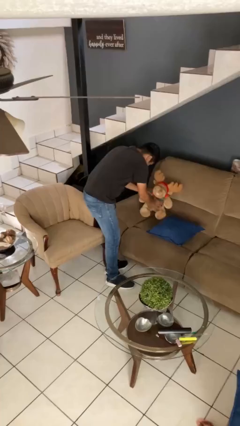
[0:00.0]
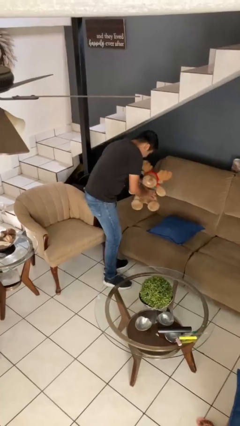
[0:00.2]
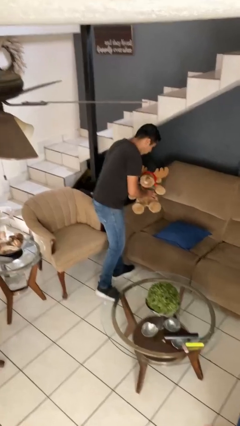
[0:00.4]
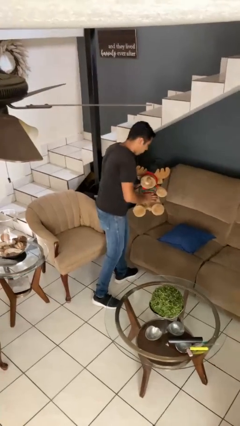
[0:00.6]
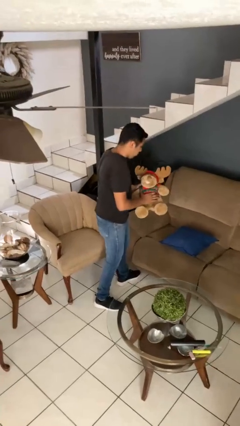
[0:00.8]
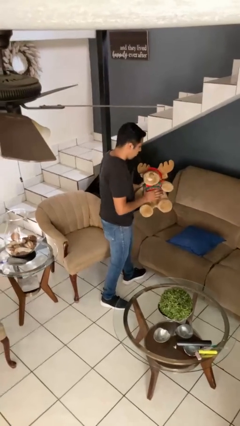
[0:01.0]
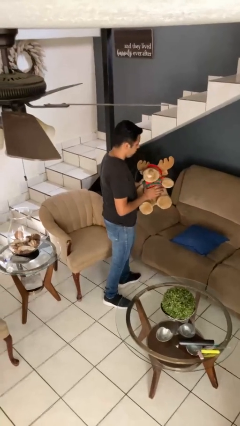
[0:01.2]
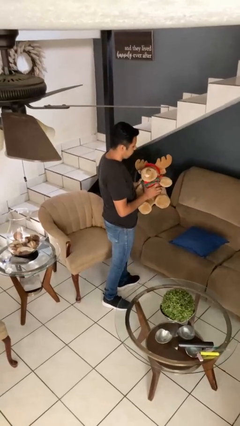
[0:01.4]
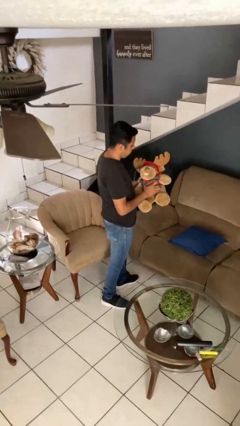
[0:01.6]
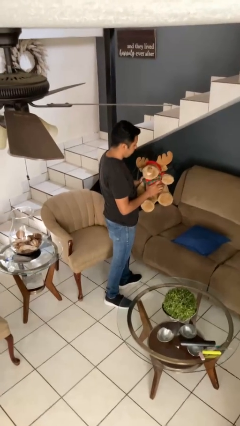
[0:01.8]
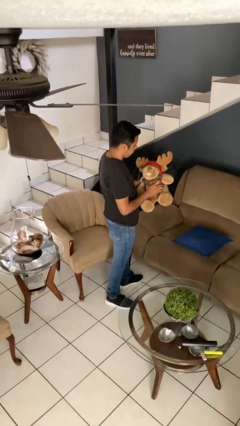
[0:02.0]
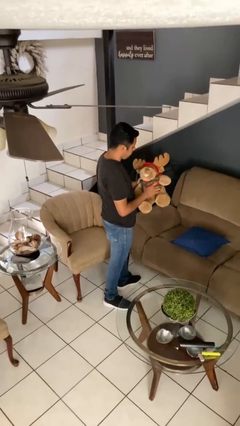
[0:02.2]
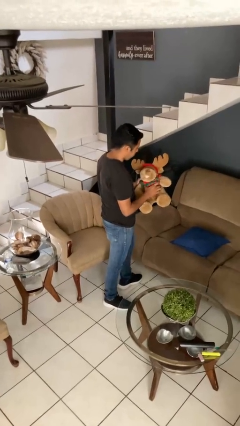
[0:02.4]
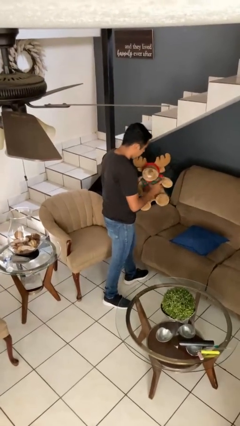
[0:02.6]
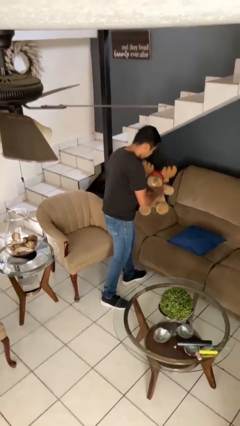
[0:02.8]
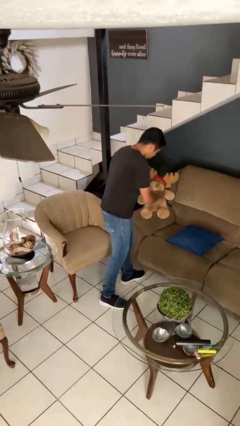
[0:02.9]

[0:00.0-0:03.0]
person picks up object from couch

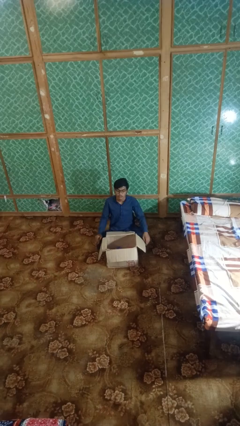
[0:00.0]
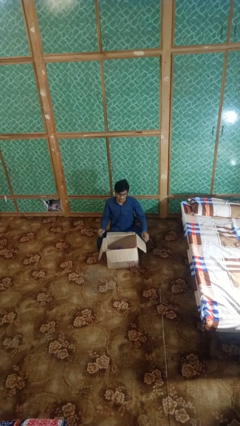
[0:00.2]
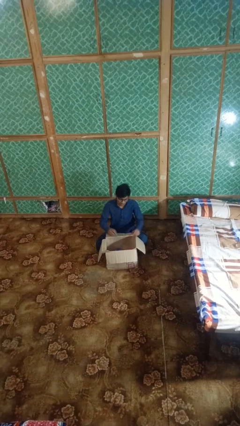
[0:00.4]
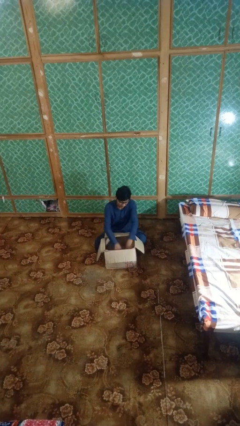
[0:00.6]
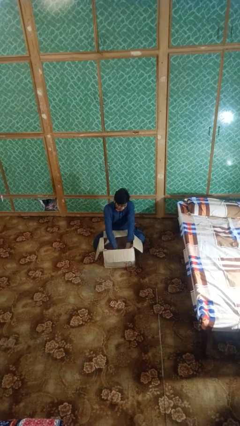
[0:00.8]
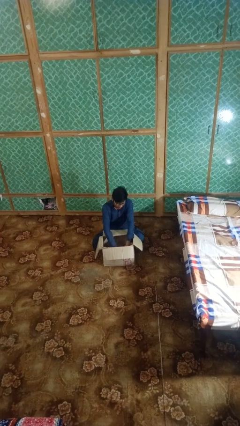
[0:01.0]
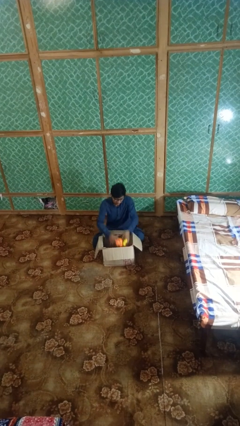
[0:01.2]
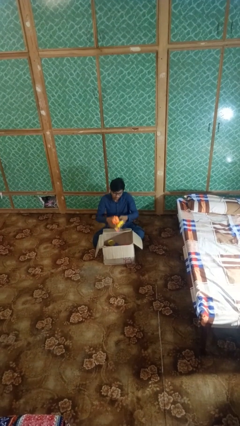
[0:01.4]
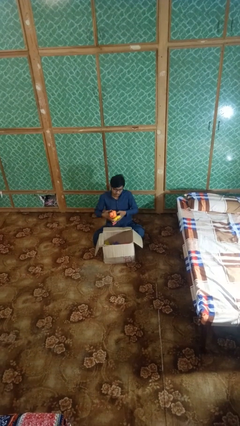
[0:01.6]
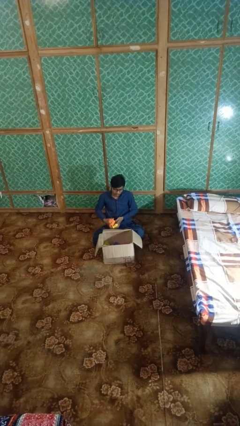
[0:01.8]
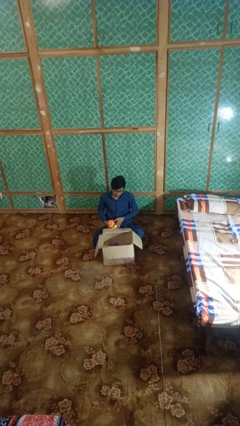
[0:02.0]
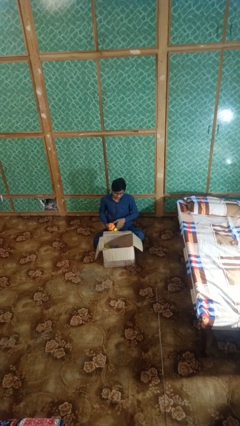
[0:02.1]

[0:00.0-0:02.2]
person takes object from box

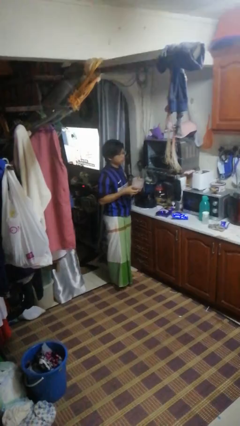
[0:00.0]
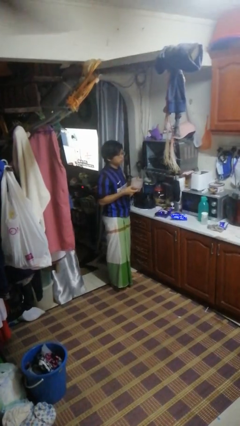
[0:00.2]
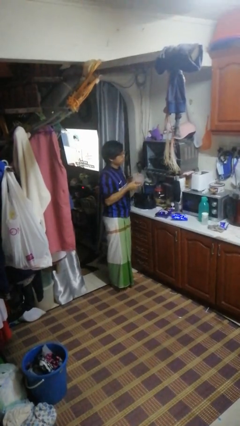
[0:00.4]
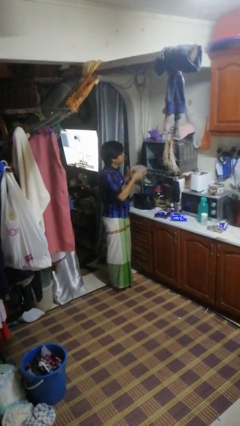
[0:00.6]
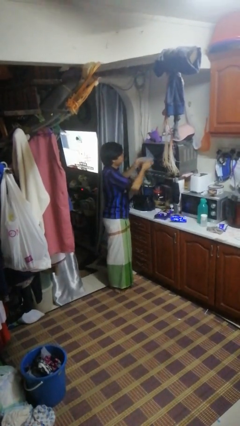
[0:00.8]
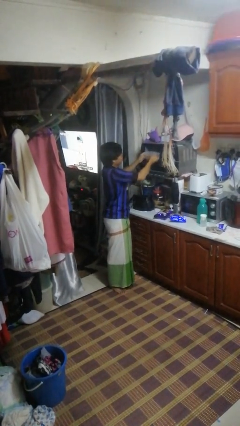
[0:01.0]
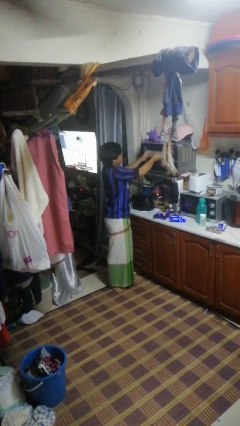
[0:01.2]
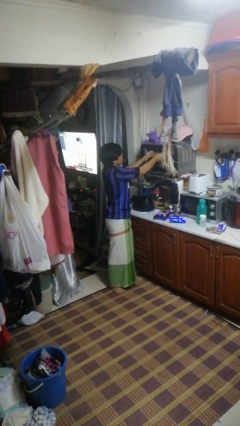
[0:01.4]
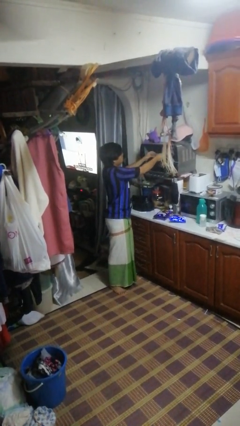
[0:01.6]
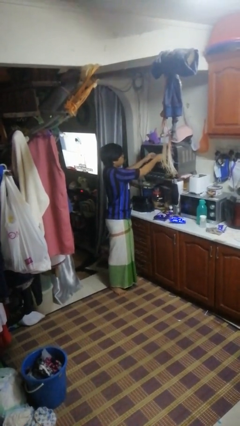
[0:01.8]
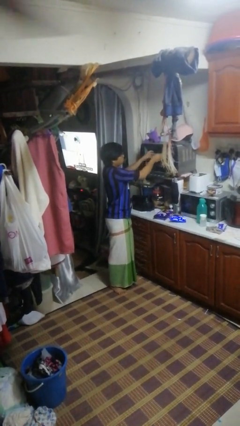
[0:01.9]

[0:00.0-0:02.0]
person puts object into oven

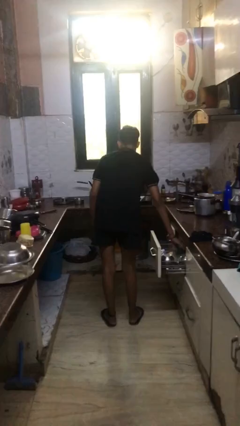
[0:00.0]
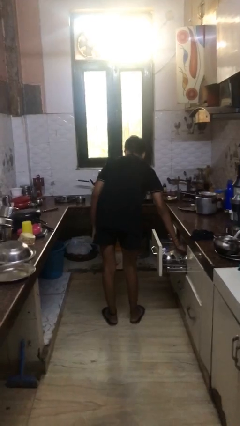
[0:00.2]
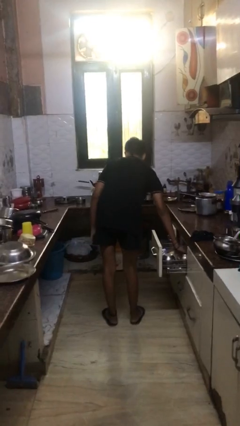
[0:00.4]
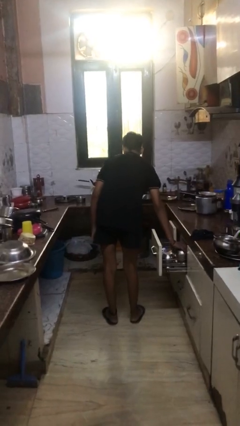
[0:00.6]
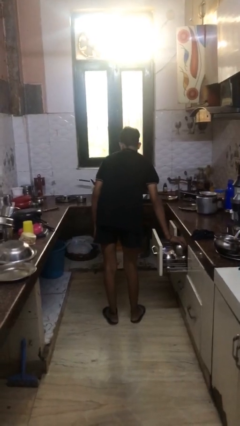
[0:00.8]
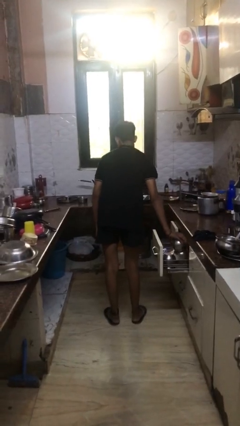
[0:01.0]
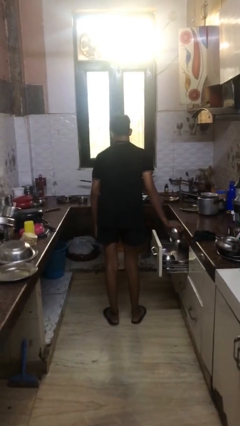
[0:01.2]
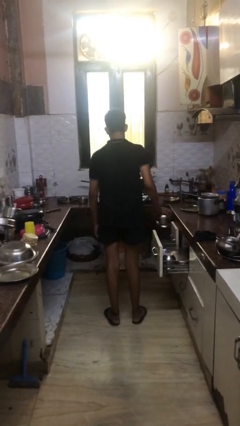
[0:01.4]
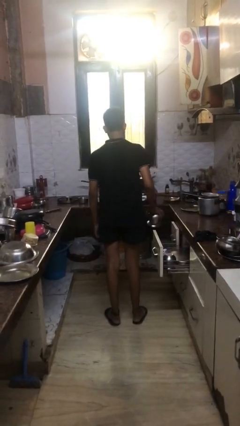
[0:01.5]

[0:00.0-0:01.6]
person takes object from kitchen drawer

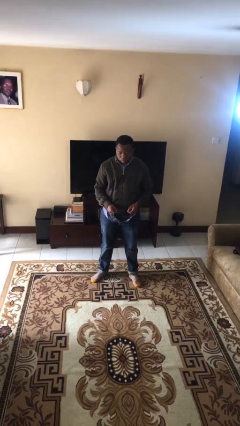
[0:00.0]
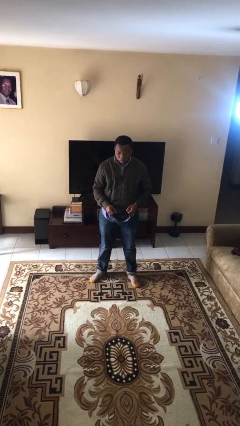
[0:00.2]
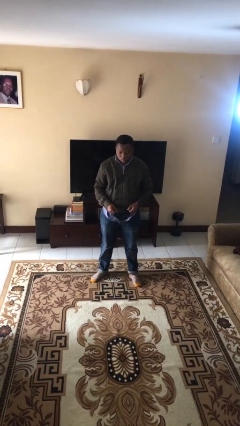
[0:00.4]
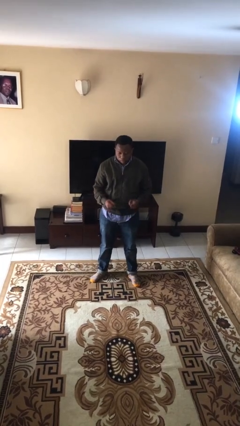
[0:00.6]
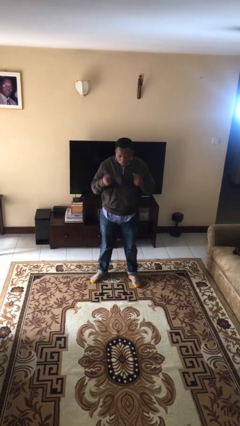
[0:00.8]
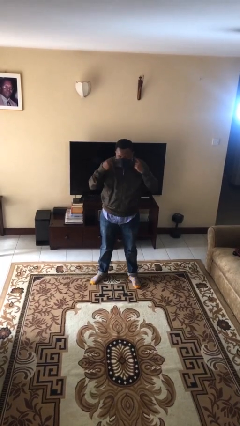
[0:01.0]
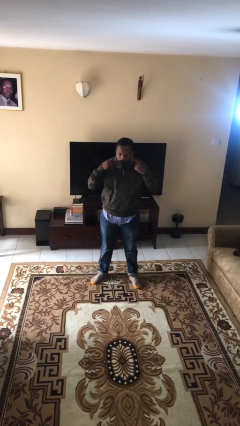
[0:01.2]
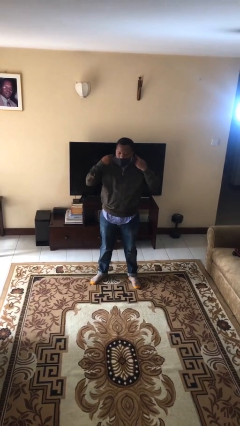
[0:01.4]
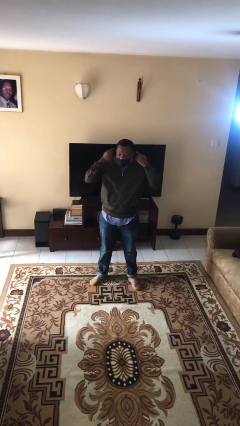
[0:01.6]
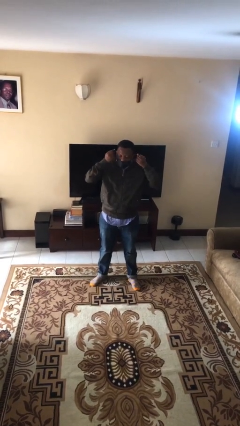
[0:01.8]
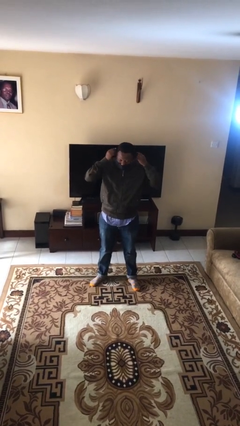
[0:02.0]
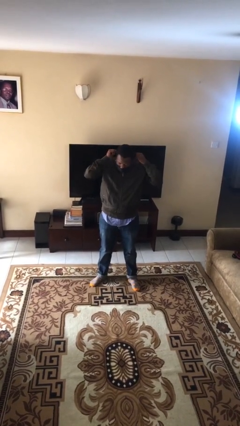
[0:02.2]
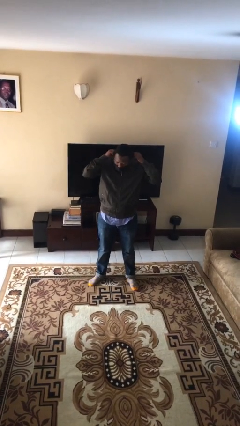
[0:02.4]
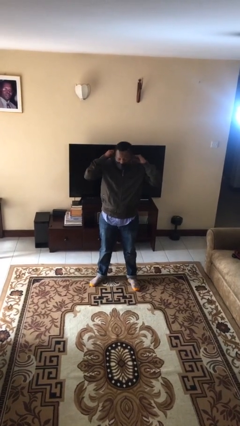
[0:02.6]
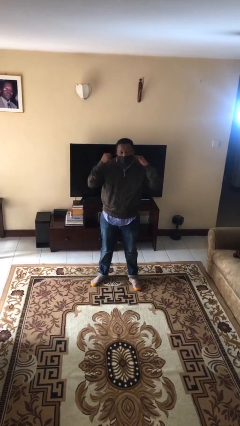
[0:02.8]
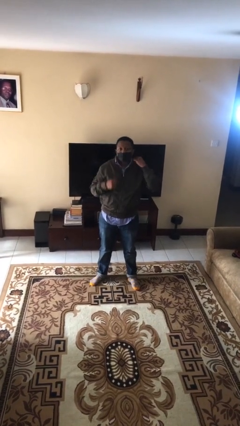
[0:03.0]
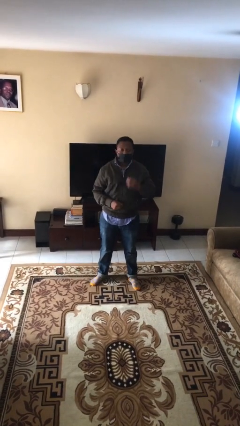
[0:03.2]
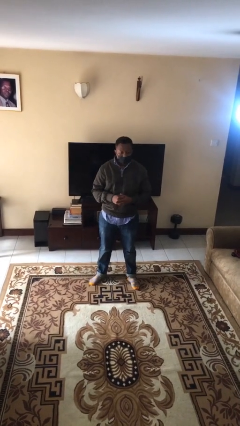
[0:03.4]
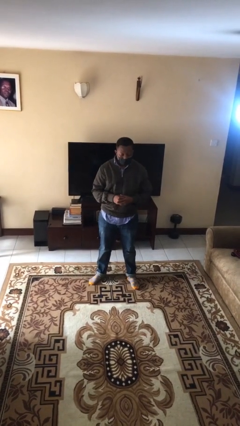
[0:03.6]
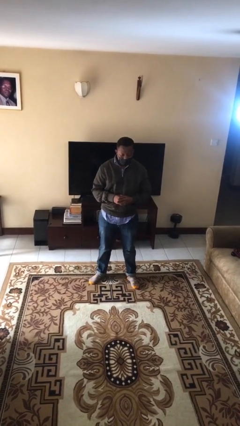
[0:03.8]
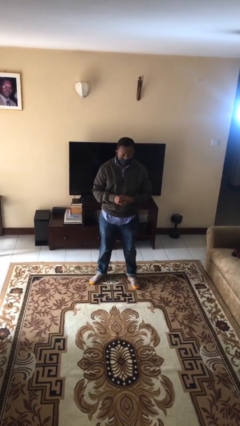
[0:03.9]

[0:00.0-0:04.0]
person puts on facemask

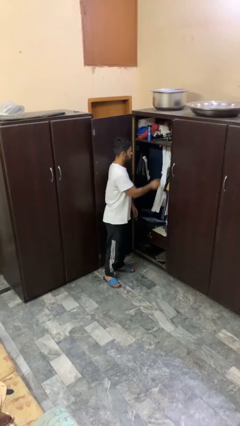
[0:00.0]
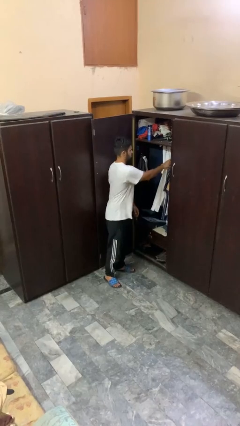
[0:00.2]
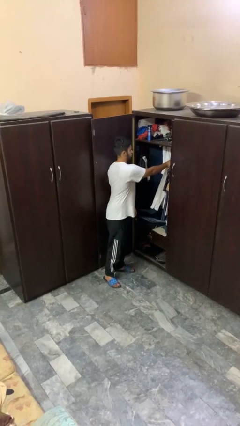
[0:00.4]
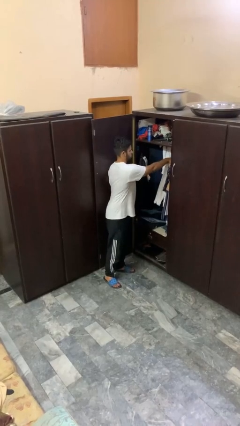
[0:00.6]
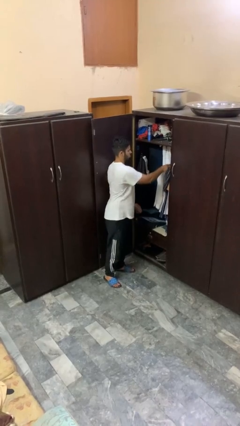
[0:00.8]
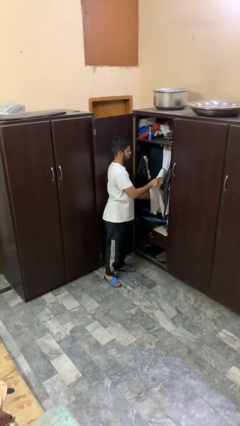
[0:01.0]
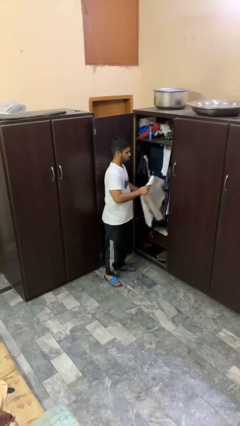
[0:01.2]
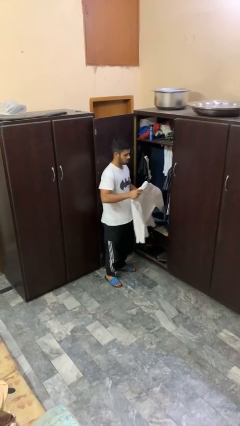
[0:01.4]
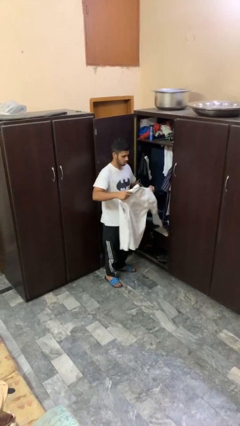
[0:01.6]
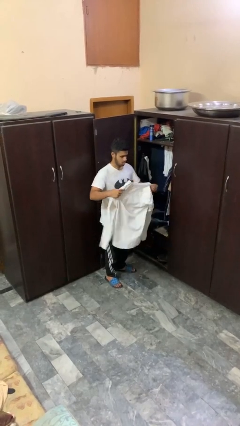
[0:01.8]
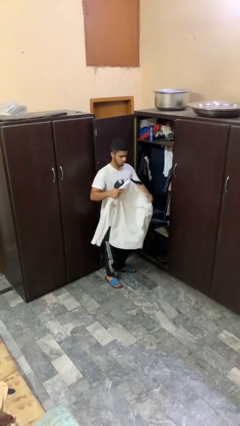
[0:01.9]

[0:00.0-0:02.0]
person takes clothes from closet

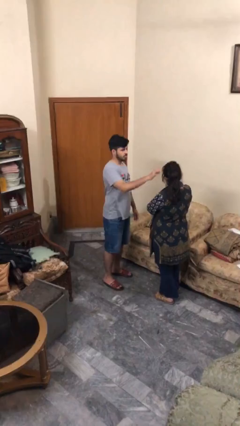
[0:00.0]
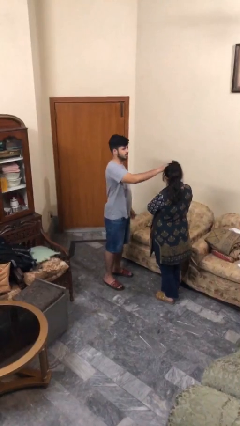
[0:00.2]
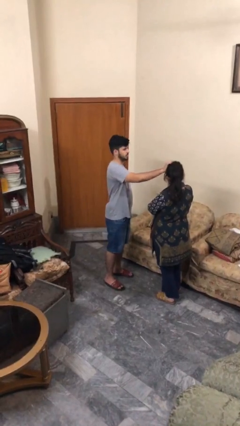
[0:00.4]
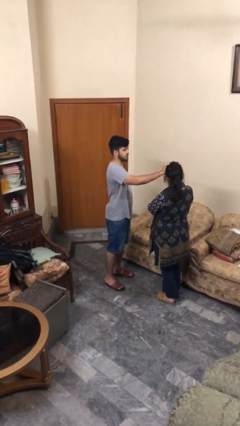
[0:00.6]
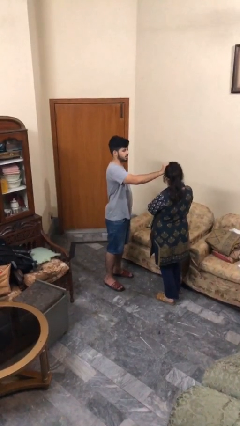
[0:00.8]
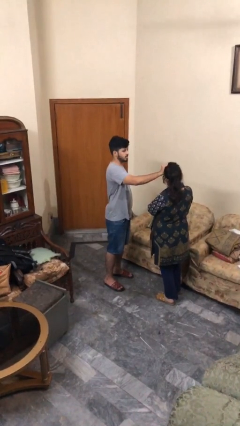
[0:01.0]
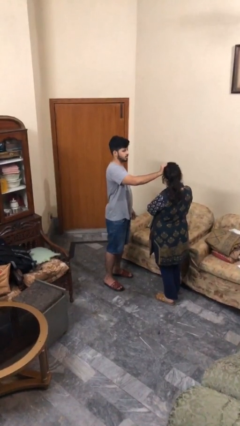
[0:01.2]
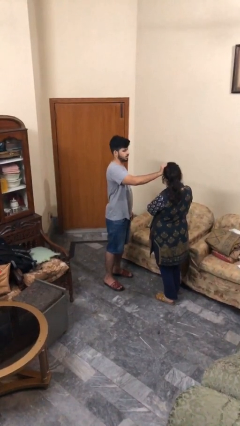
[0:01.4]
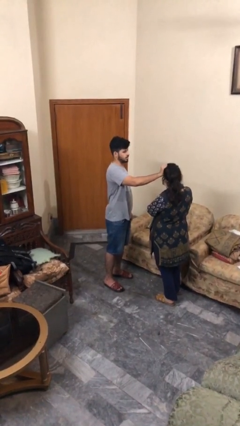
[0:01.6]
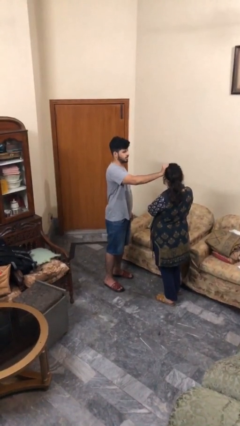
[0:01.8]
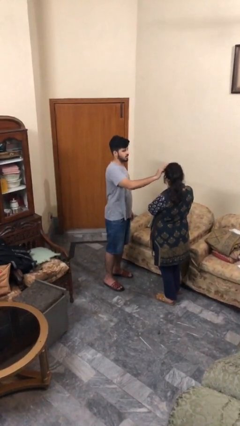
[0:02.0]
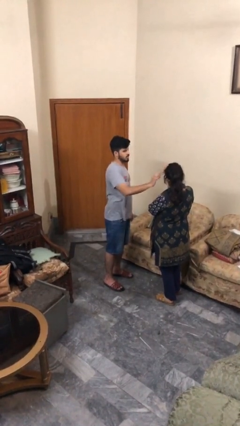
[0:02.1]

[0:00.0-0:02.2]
person grabs person by hair
